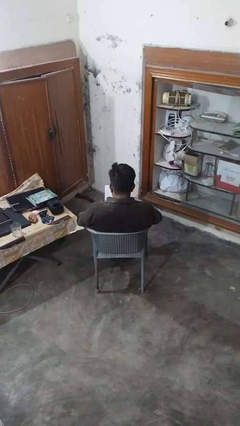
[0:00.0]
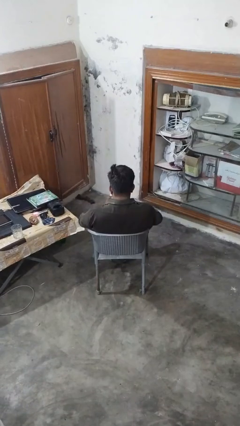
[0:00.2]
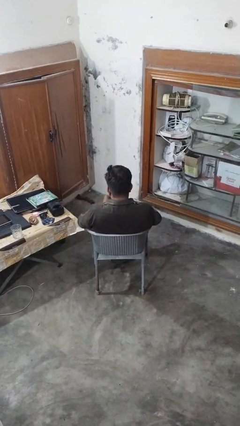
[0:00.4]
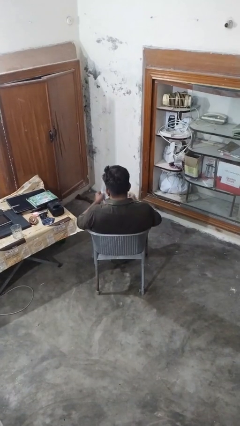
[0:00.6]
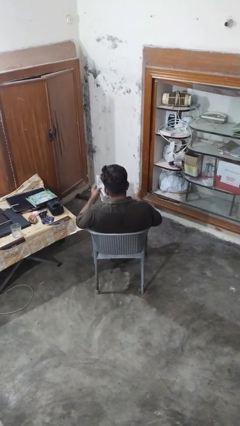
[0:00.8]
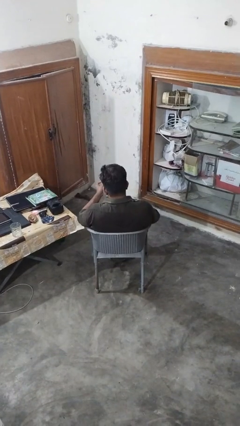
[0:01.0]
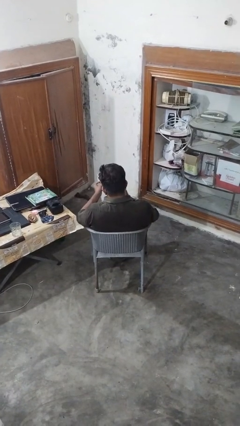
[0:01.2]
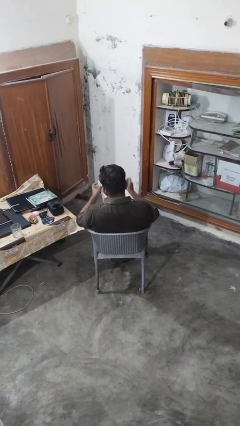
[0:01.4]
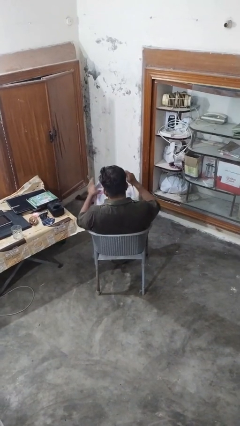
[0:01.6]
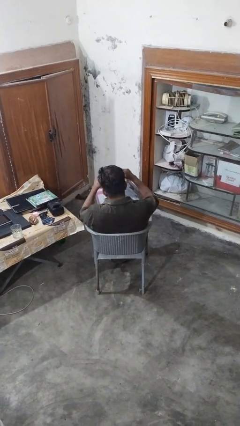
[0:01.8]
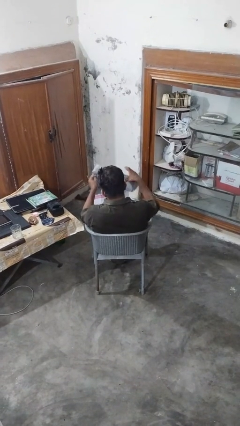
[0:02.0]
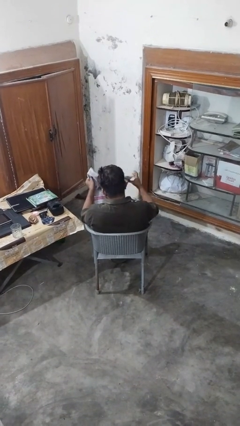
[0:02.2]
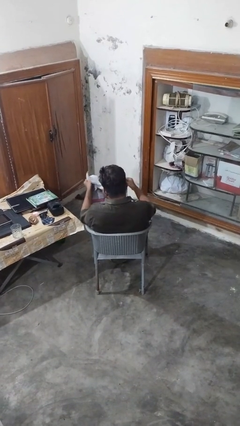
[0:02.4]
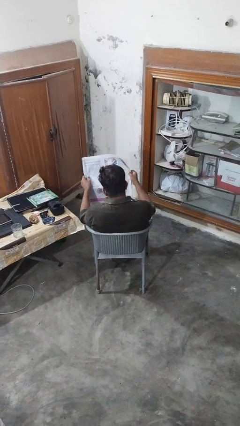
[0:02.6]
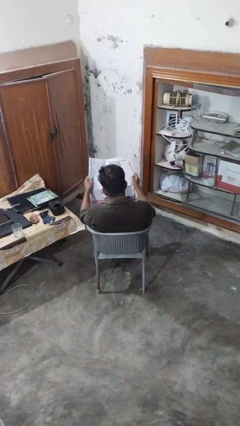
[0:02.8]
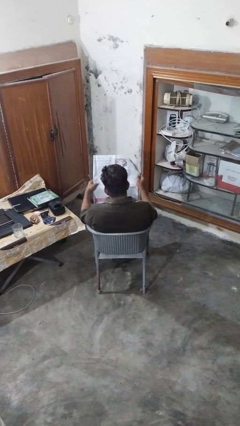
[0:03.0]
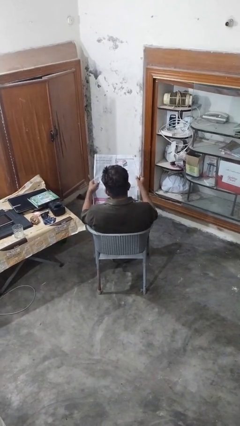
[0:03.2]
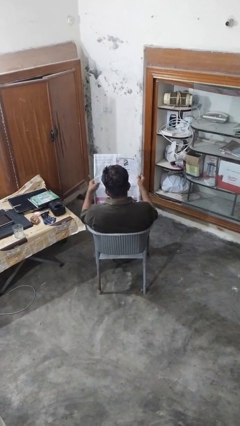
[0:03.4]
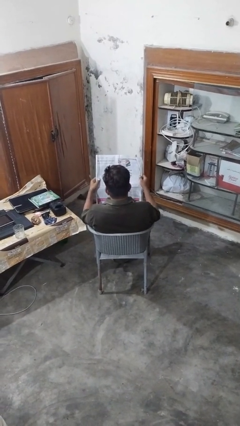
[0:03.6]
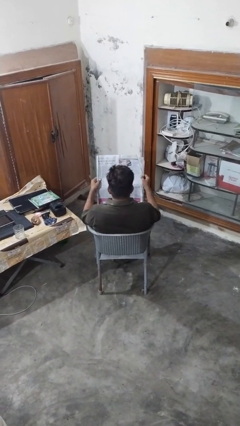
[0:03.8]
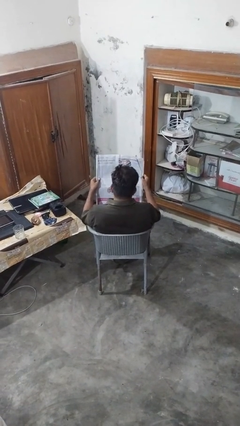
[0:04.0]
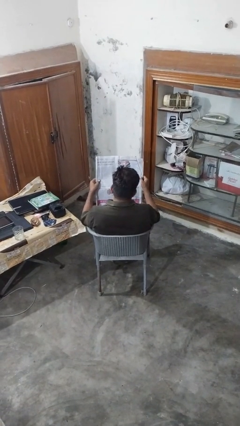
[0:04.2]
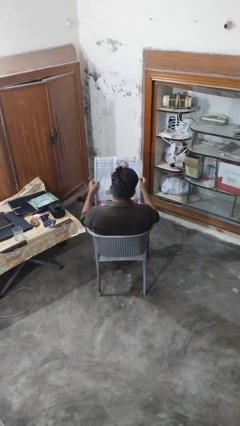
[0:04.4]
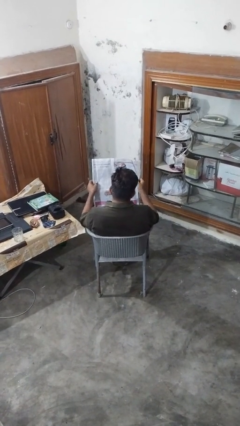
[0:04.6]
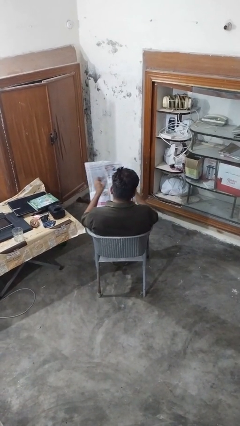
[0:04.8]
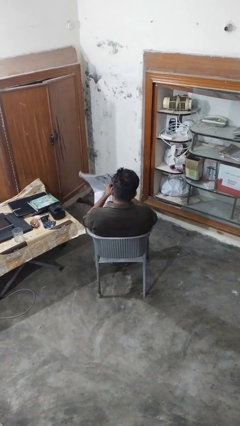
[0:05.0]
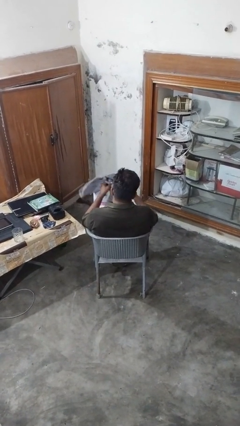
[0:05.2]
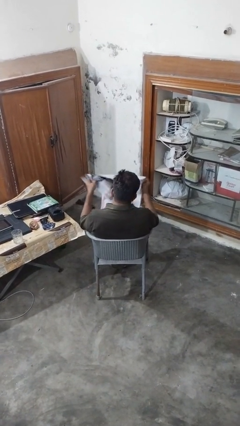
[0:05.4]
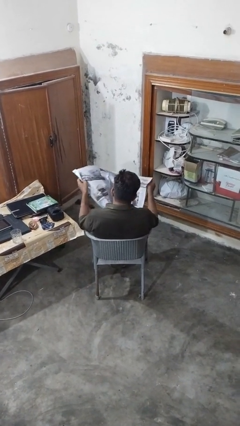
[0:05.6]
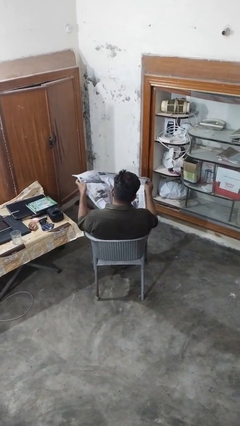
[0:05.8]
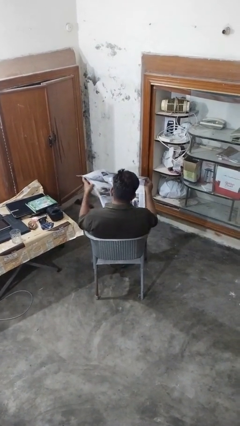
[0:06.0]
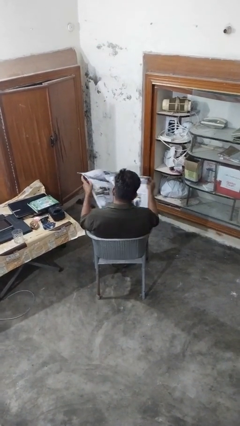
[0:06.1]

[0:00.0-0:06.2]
person reads newspaper

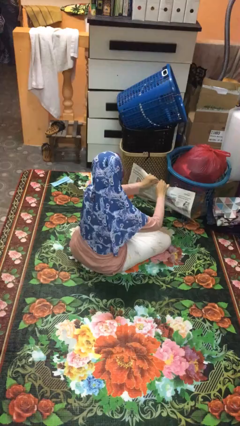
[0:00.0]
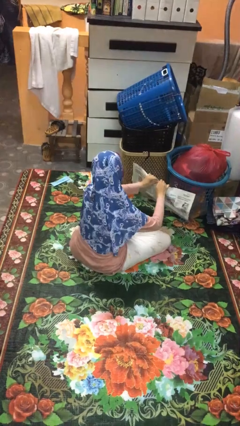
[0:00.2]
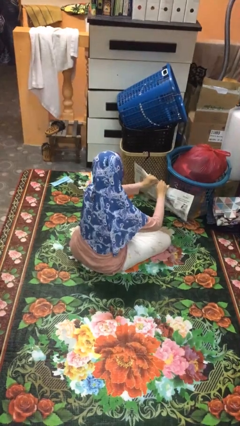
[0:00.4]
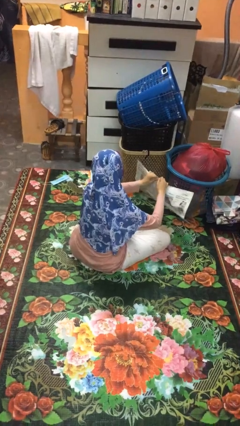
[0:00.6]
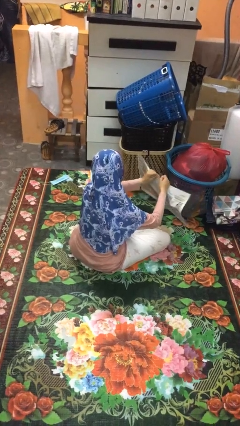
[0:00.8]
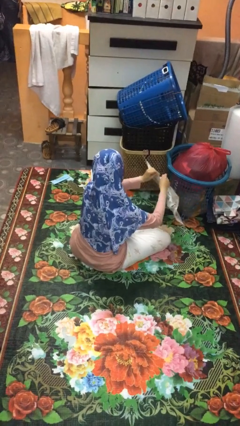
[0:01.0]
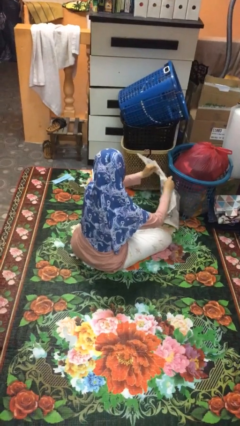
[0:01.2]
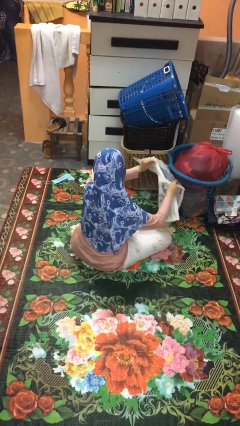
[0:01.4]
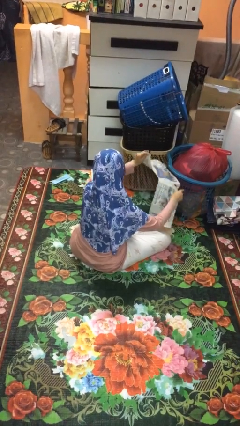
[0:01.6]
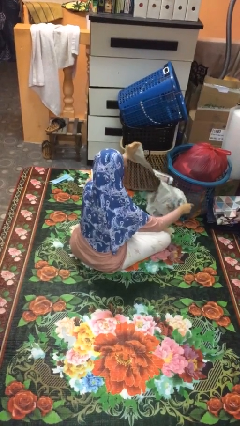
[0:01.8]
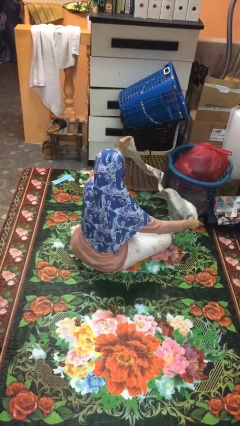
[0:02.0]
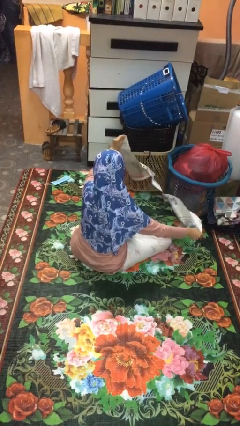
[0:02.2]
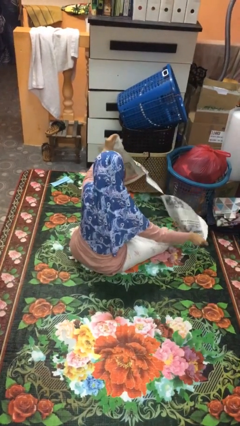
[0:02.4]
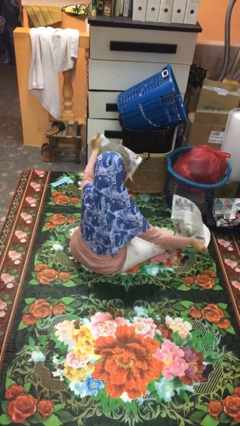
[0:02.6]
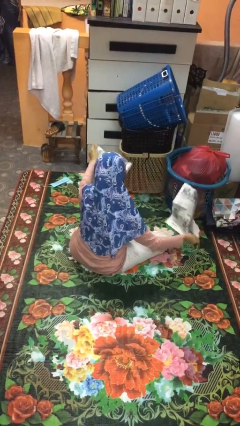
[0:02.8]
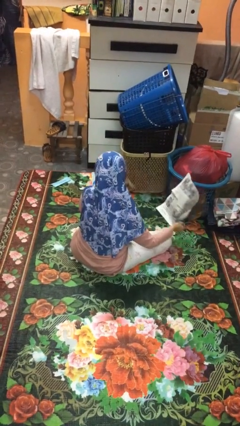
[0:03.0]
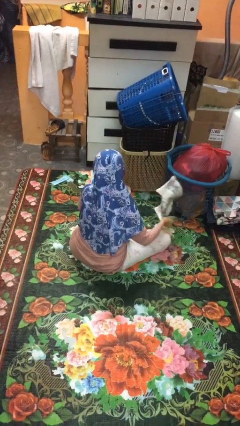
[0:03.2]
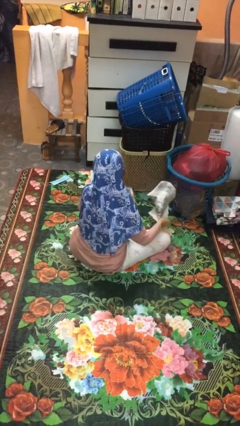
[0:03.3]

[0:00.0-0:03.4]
person tears paper

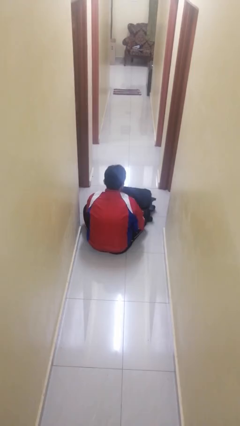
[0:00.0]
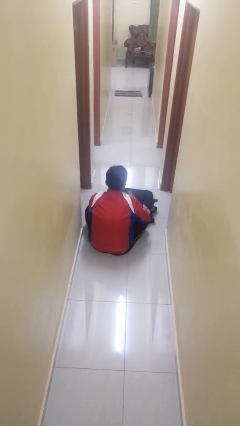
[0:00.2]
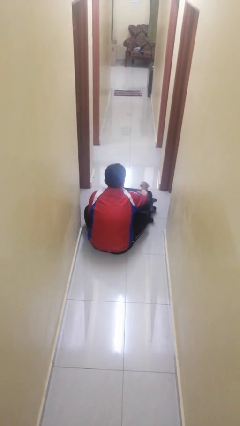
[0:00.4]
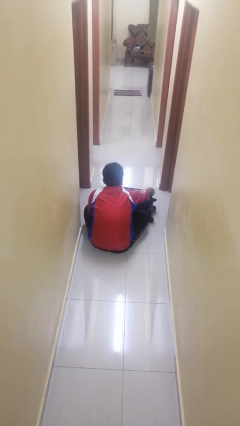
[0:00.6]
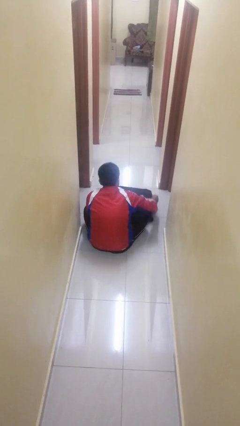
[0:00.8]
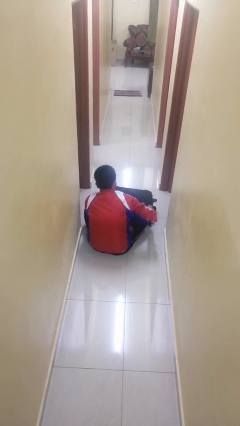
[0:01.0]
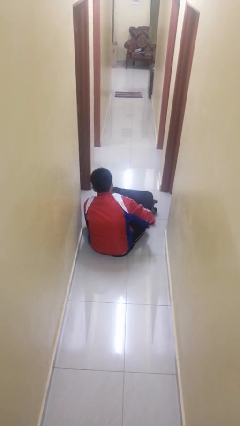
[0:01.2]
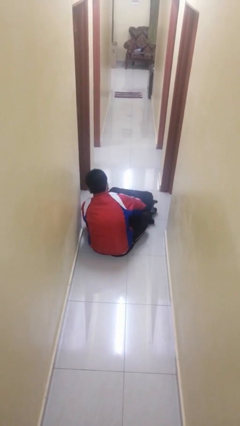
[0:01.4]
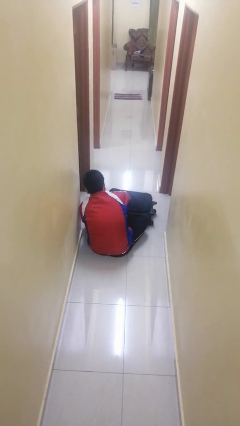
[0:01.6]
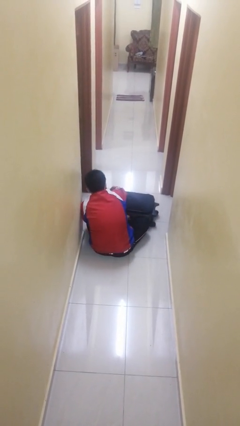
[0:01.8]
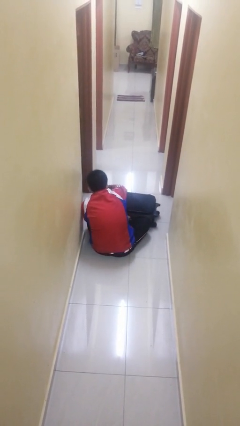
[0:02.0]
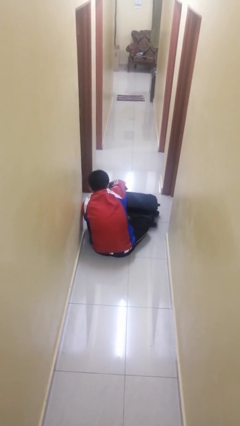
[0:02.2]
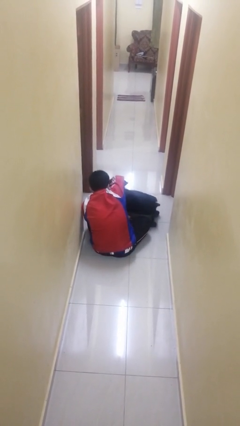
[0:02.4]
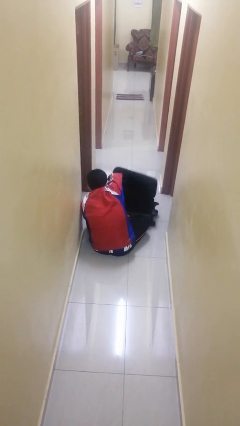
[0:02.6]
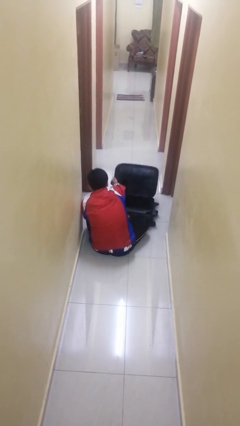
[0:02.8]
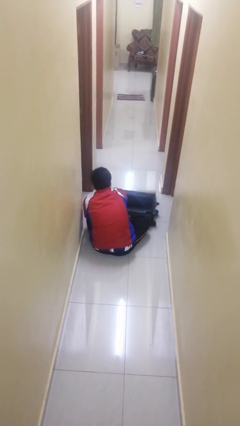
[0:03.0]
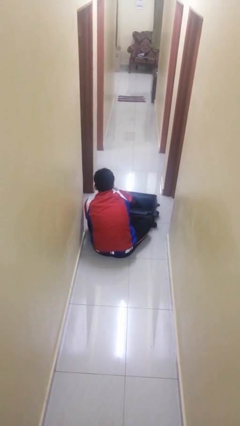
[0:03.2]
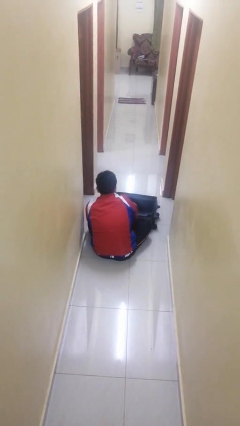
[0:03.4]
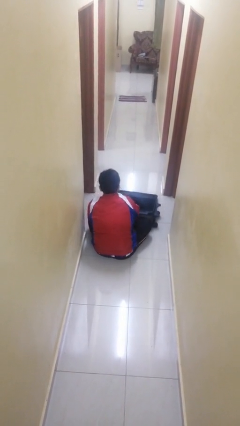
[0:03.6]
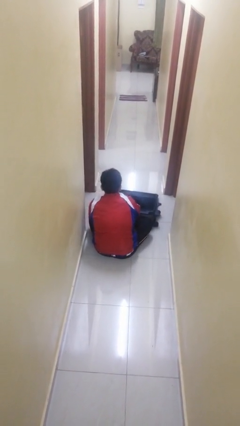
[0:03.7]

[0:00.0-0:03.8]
person opens suitcase

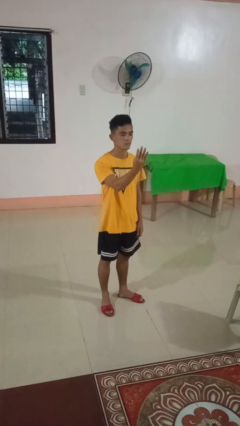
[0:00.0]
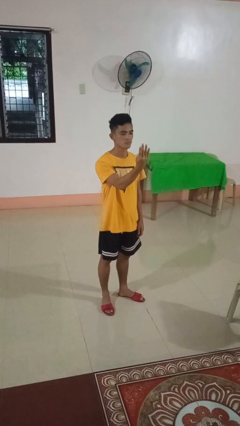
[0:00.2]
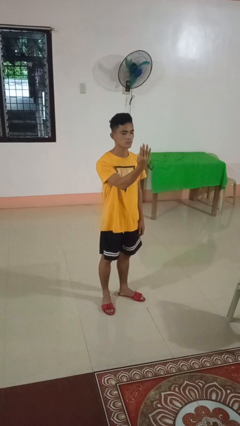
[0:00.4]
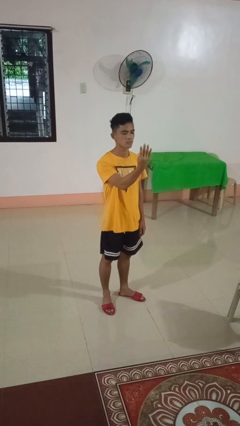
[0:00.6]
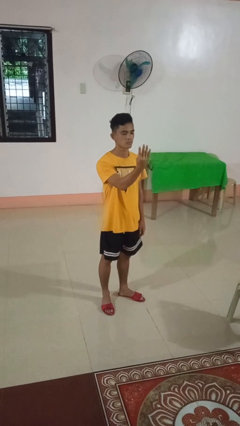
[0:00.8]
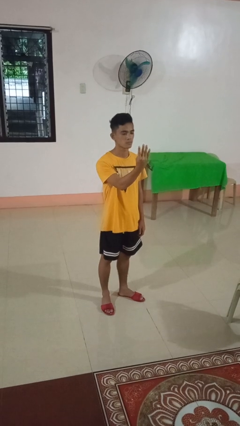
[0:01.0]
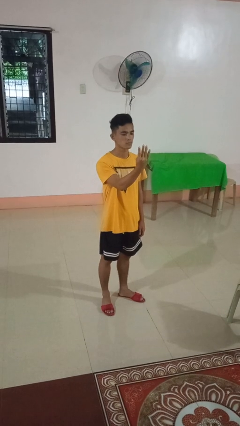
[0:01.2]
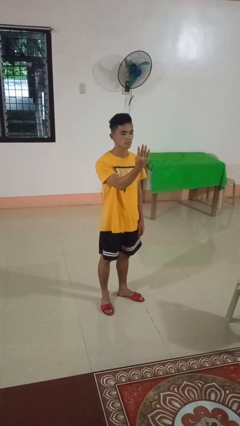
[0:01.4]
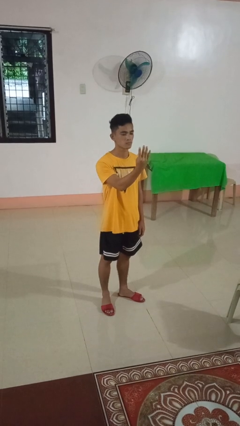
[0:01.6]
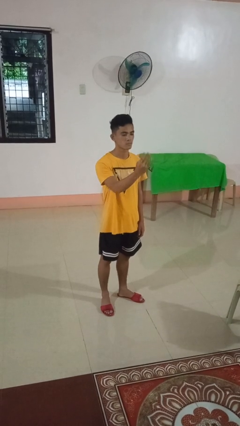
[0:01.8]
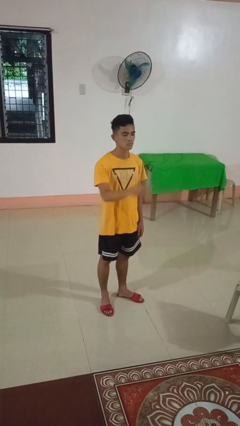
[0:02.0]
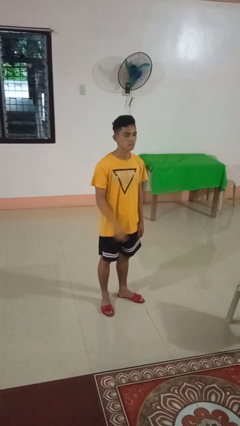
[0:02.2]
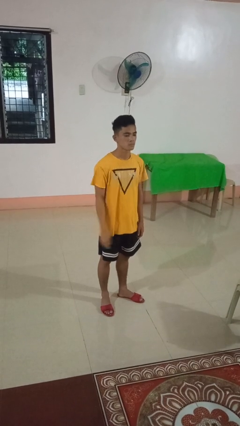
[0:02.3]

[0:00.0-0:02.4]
person gestures number four

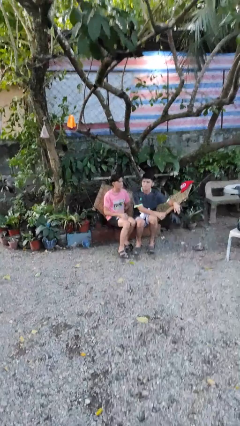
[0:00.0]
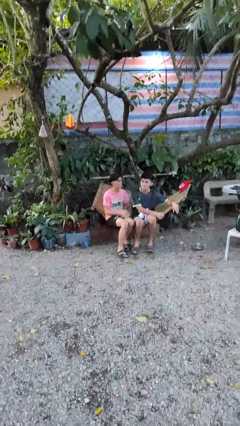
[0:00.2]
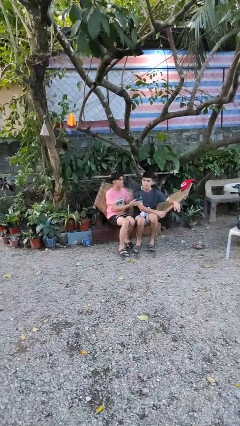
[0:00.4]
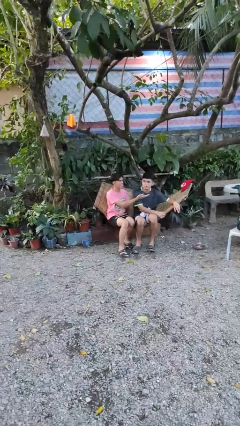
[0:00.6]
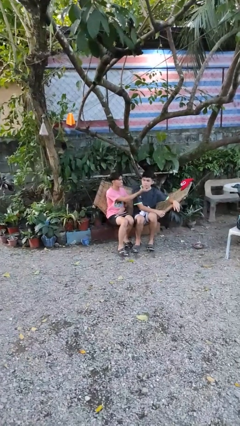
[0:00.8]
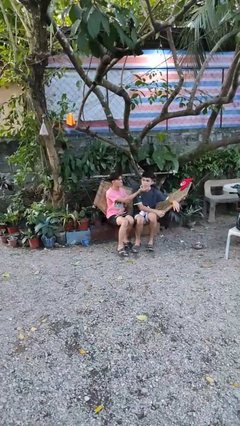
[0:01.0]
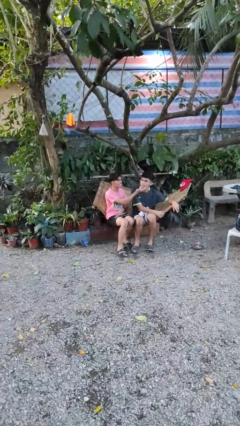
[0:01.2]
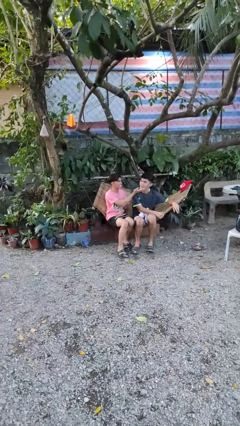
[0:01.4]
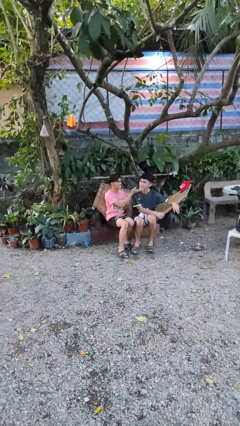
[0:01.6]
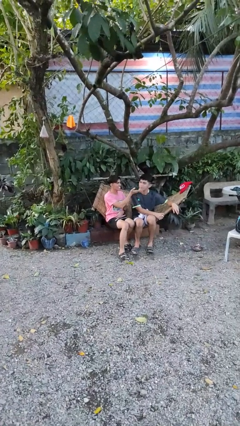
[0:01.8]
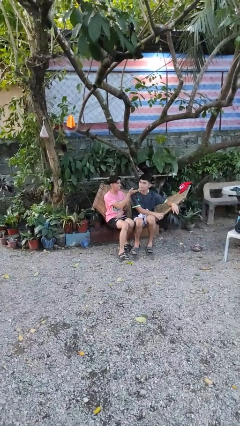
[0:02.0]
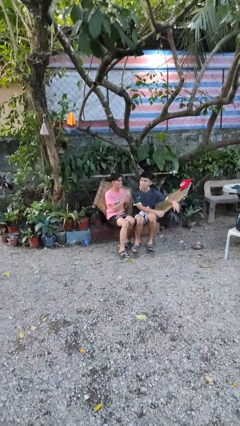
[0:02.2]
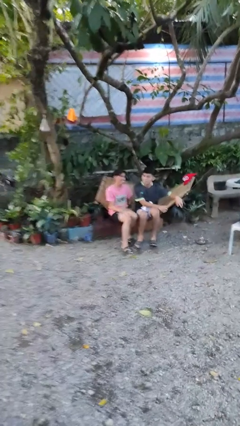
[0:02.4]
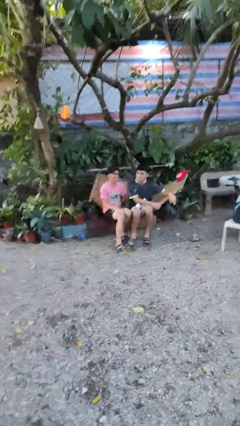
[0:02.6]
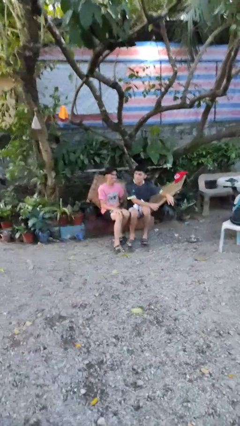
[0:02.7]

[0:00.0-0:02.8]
person touches face of person
